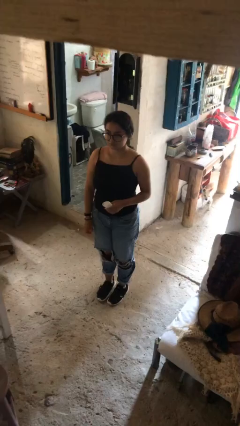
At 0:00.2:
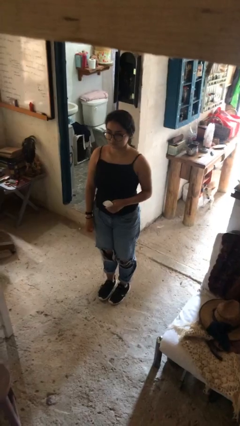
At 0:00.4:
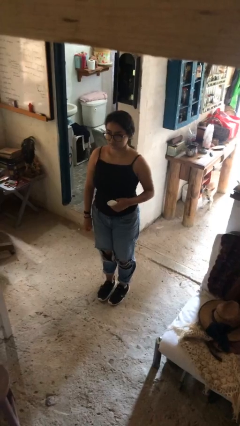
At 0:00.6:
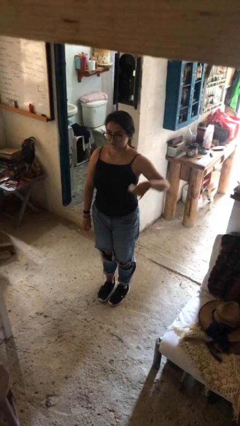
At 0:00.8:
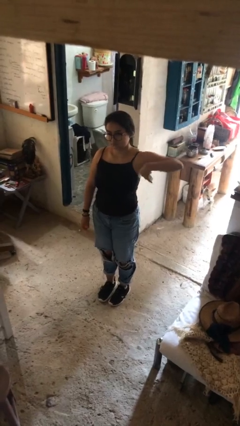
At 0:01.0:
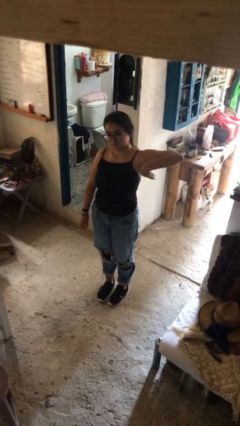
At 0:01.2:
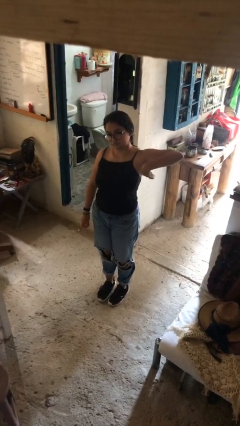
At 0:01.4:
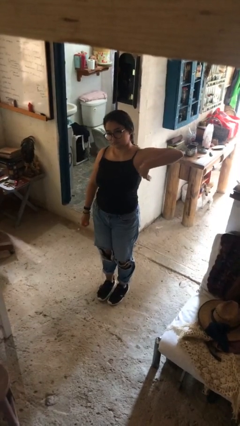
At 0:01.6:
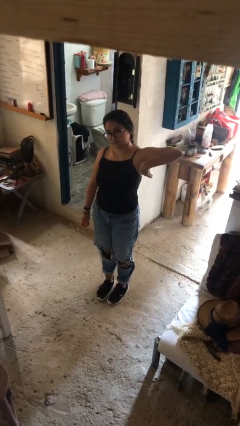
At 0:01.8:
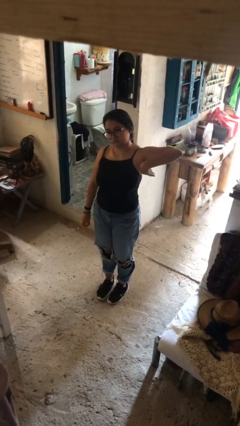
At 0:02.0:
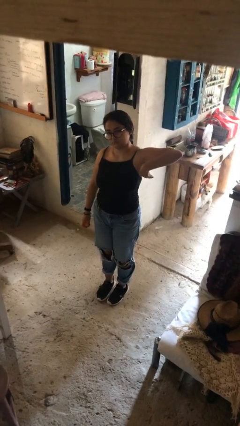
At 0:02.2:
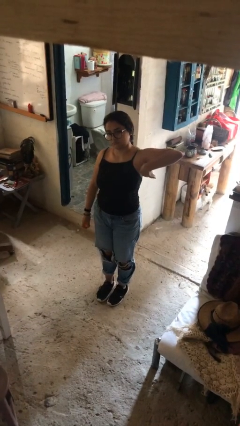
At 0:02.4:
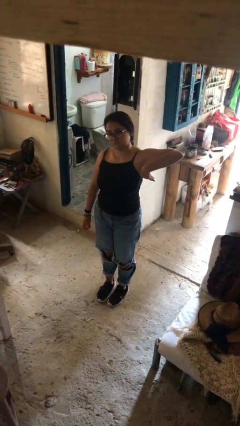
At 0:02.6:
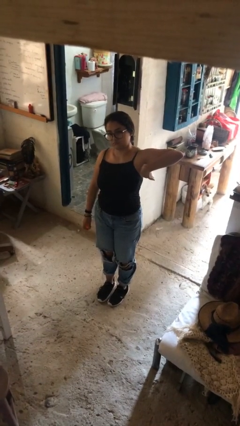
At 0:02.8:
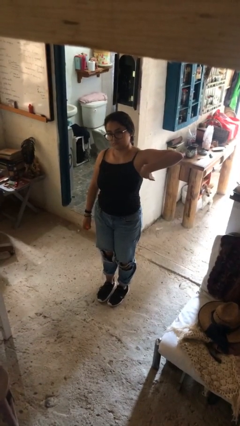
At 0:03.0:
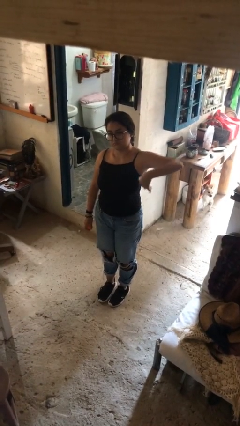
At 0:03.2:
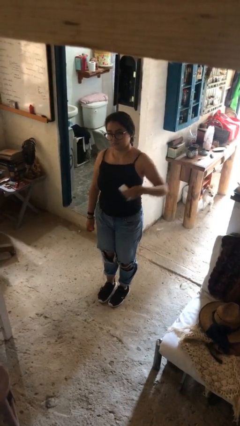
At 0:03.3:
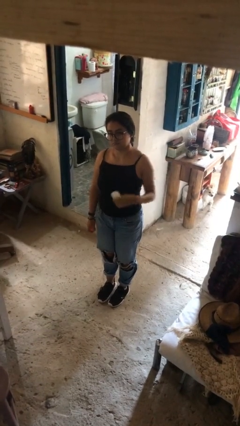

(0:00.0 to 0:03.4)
person applies deodorant

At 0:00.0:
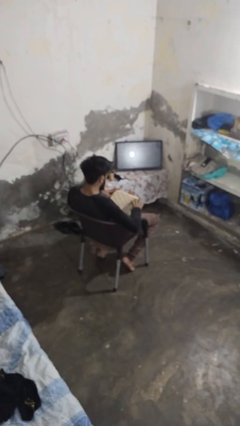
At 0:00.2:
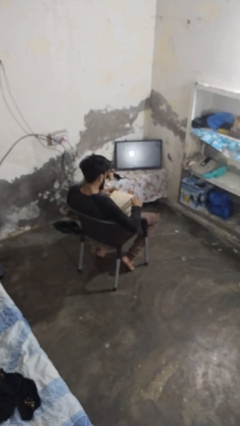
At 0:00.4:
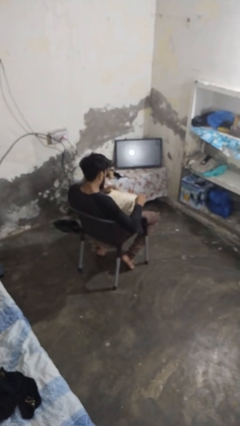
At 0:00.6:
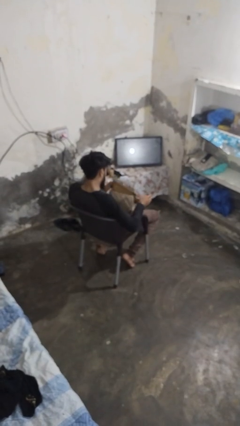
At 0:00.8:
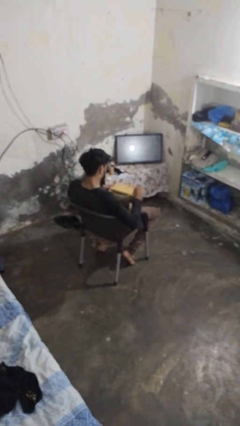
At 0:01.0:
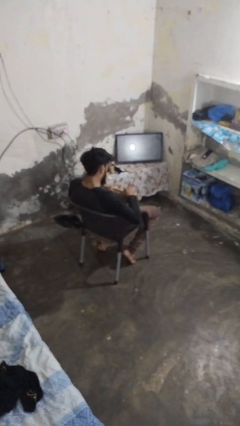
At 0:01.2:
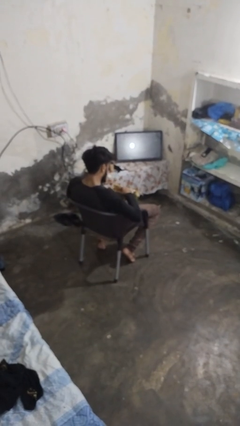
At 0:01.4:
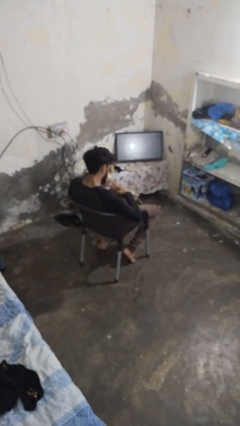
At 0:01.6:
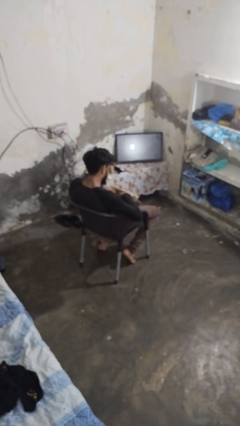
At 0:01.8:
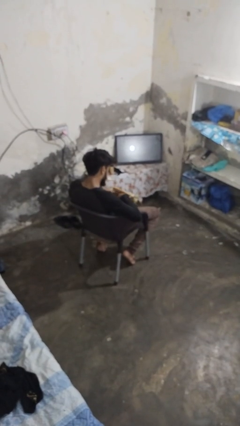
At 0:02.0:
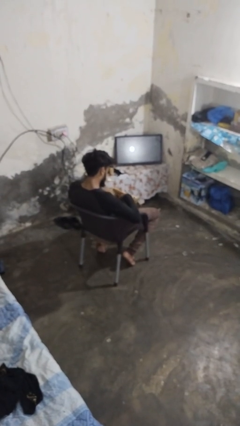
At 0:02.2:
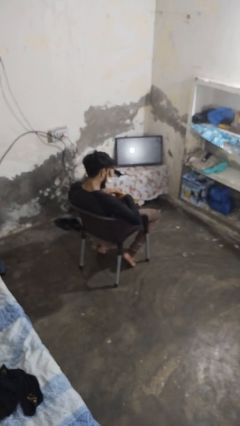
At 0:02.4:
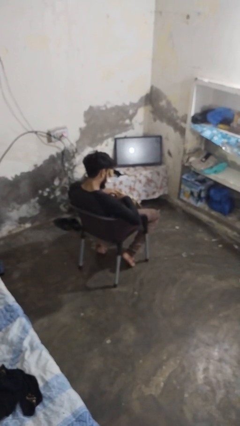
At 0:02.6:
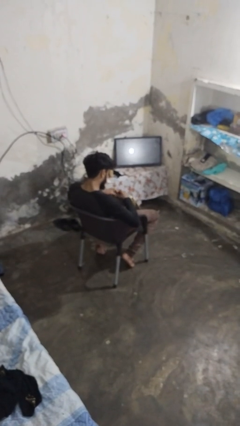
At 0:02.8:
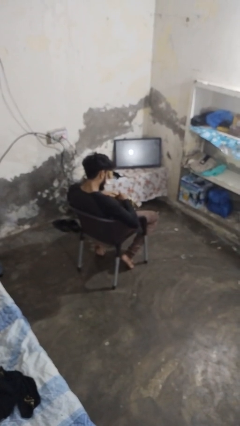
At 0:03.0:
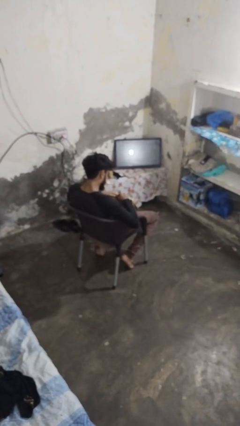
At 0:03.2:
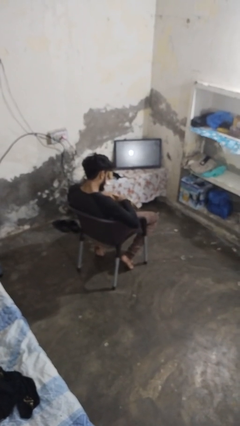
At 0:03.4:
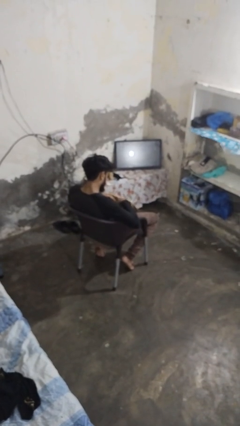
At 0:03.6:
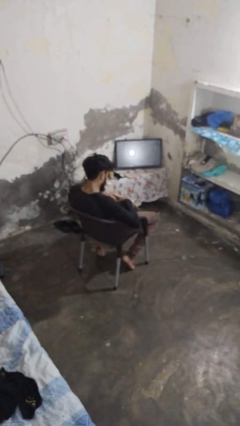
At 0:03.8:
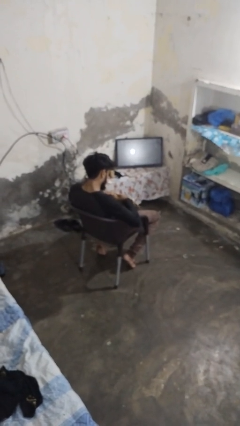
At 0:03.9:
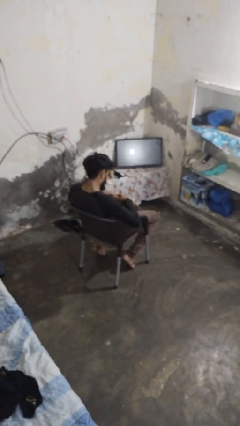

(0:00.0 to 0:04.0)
person searches in purse

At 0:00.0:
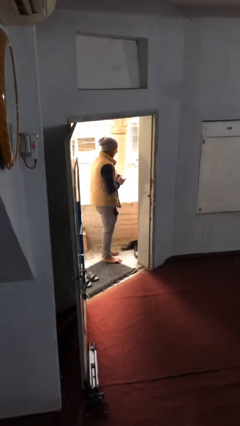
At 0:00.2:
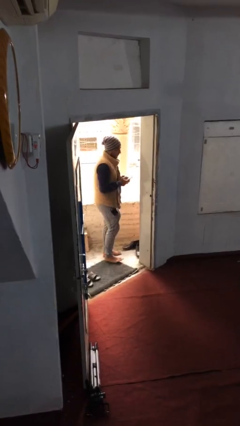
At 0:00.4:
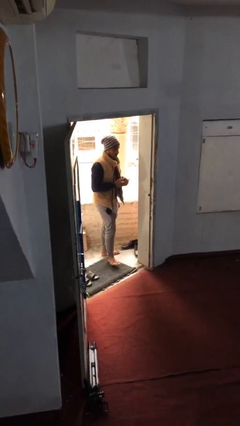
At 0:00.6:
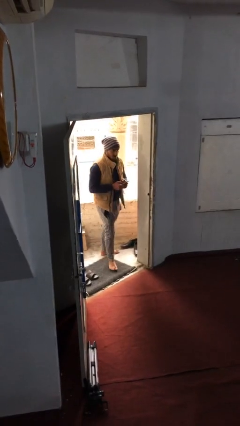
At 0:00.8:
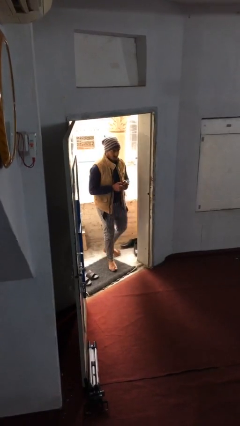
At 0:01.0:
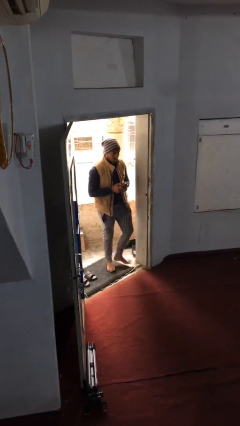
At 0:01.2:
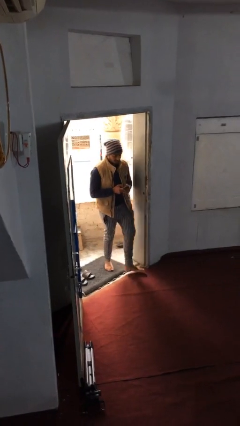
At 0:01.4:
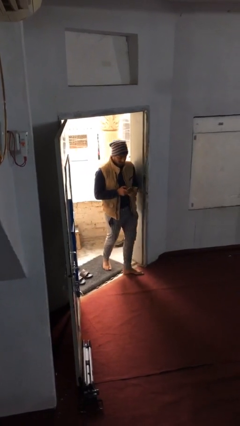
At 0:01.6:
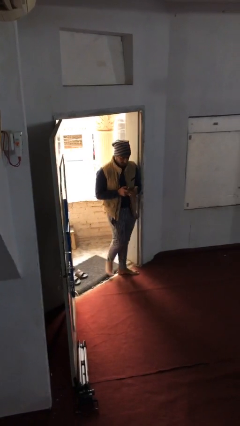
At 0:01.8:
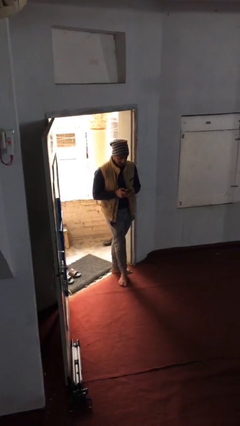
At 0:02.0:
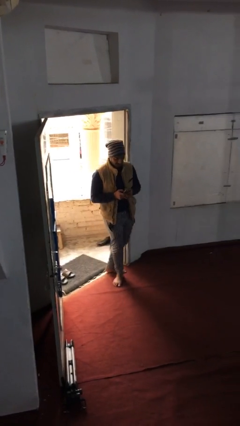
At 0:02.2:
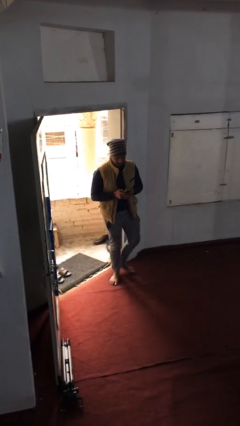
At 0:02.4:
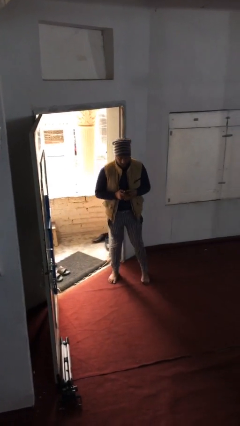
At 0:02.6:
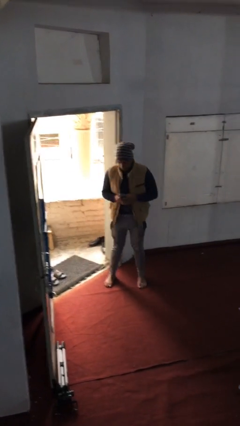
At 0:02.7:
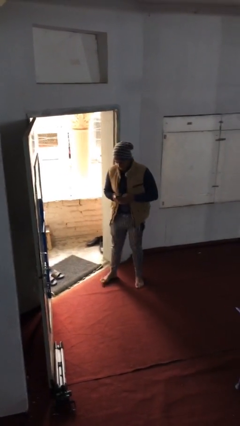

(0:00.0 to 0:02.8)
person enters scene through structure

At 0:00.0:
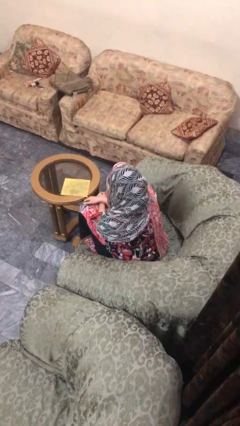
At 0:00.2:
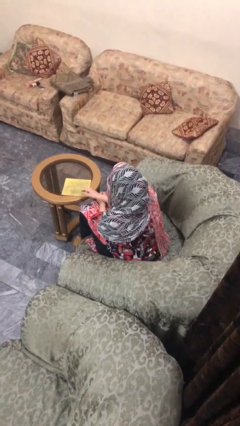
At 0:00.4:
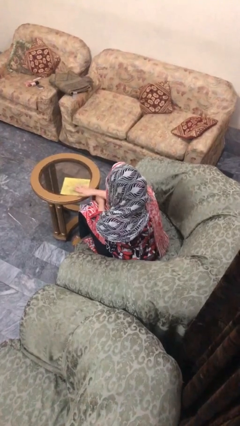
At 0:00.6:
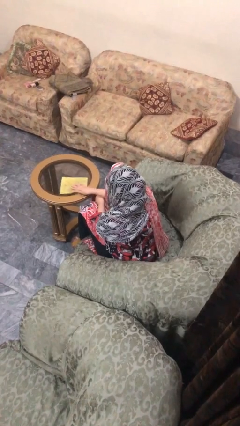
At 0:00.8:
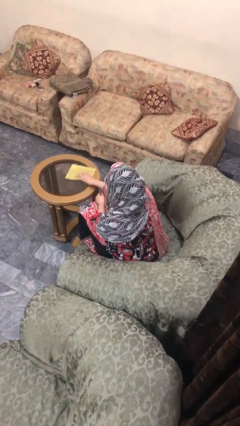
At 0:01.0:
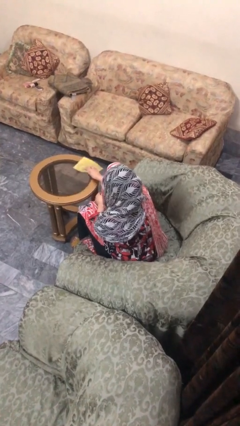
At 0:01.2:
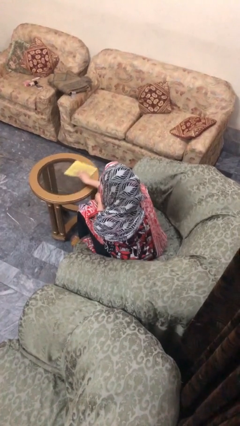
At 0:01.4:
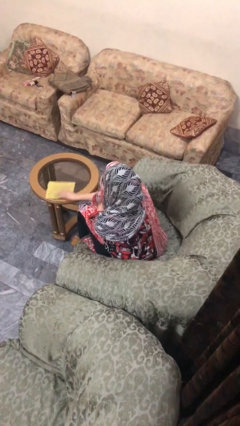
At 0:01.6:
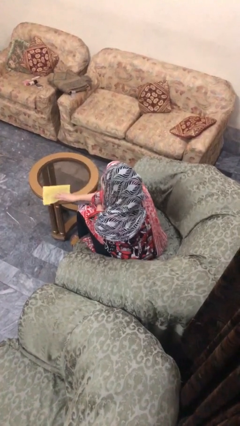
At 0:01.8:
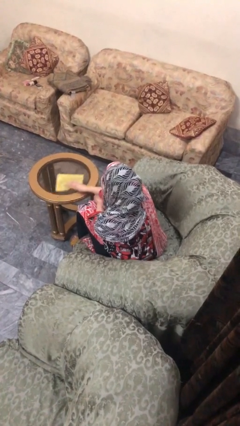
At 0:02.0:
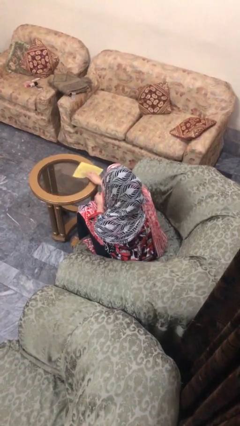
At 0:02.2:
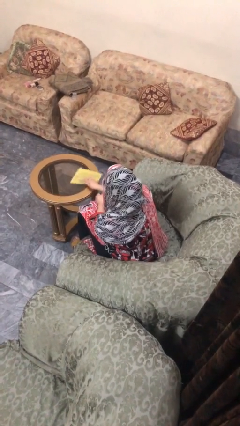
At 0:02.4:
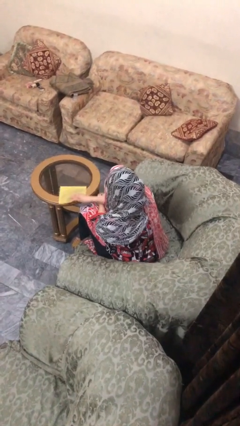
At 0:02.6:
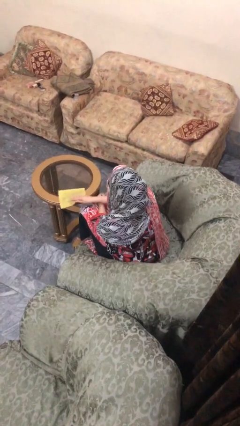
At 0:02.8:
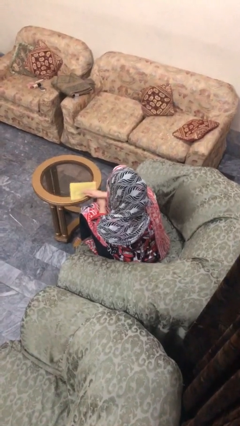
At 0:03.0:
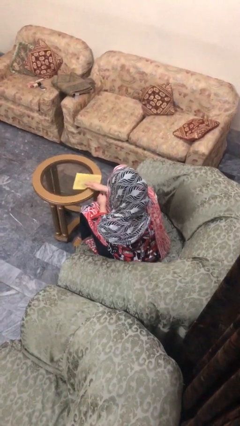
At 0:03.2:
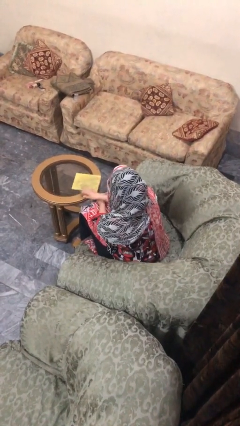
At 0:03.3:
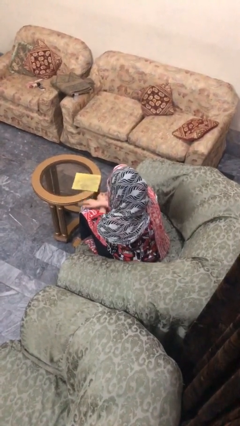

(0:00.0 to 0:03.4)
person cleans table with rag

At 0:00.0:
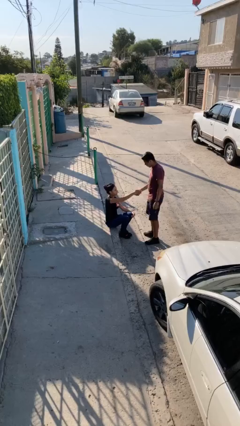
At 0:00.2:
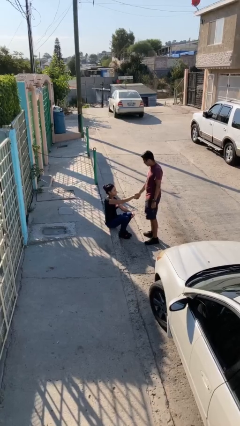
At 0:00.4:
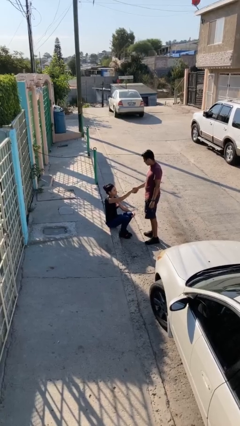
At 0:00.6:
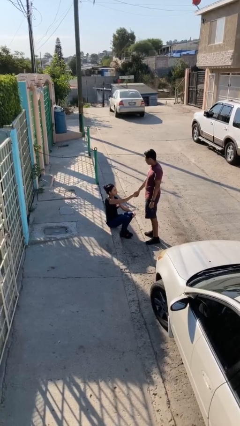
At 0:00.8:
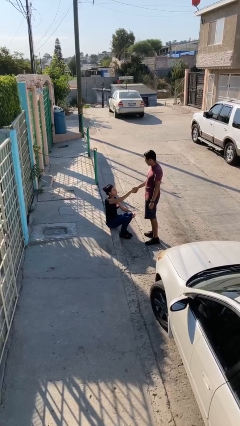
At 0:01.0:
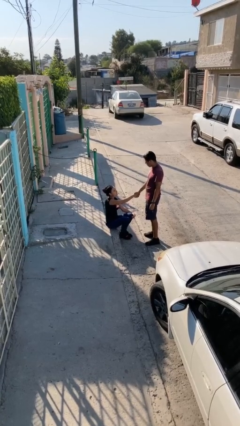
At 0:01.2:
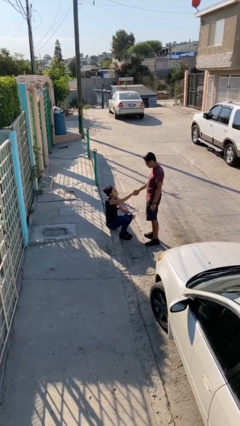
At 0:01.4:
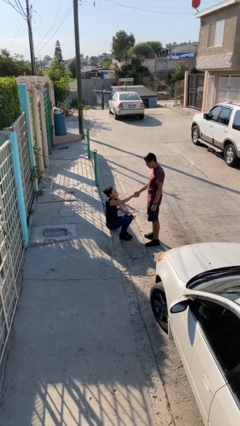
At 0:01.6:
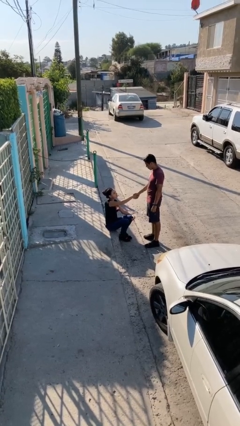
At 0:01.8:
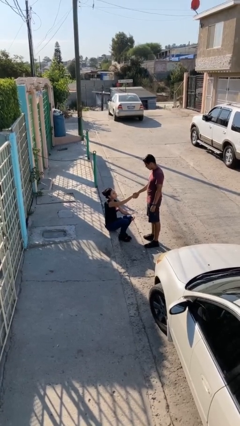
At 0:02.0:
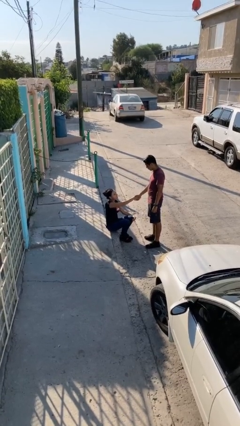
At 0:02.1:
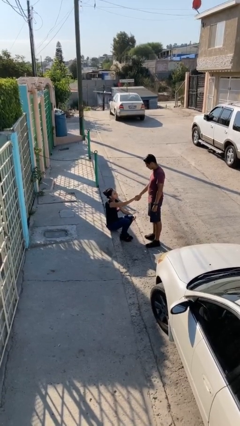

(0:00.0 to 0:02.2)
person shakes hand

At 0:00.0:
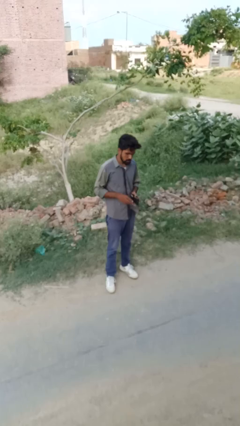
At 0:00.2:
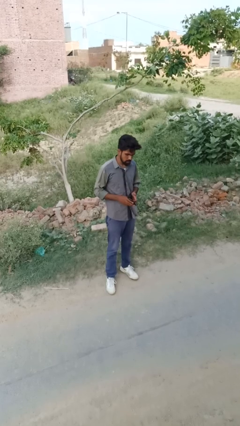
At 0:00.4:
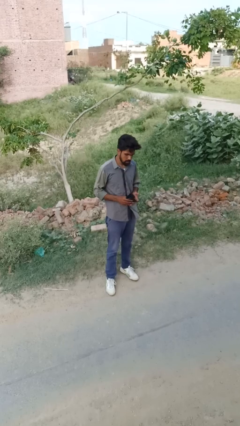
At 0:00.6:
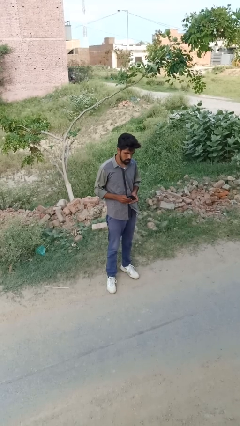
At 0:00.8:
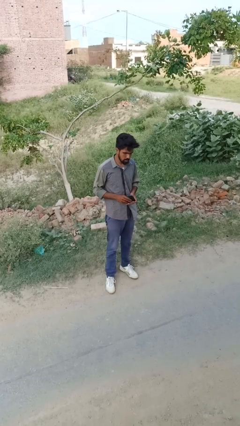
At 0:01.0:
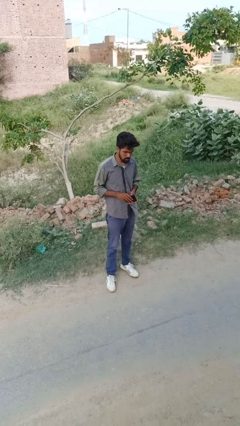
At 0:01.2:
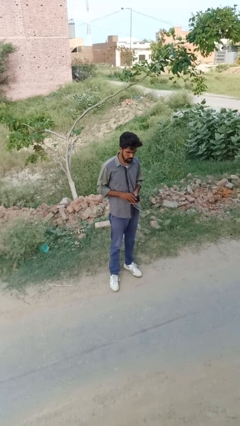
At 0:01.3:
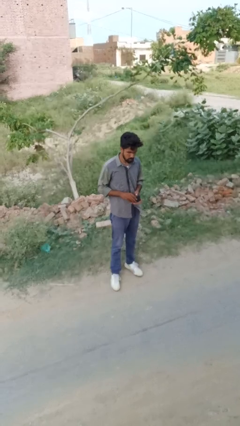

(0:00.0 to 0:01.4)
person puts object into purse
